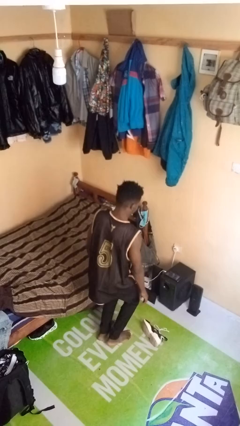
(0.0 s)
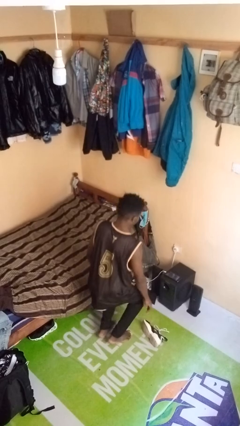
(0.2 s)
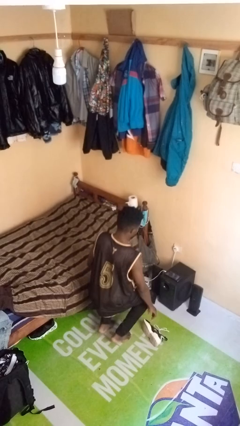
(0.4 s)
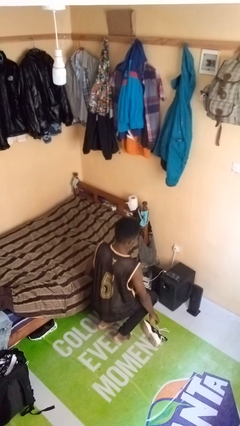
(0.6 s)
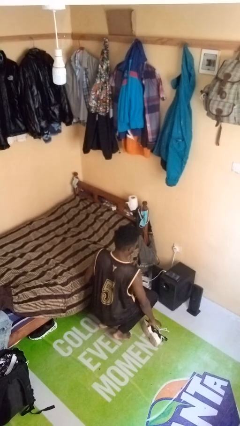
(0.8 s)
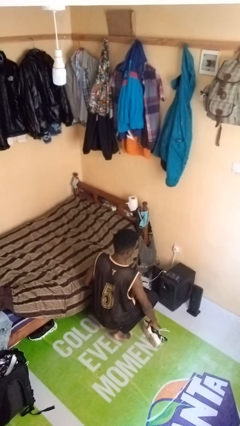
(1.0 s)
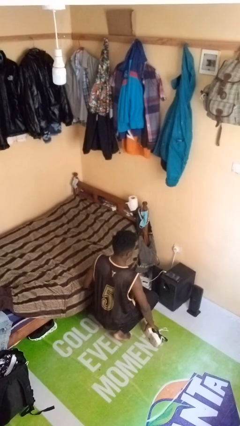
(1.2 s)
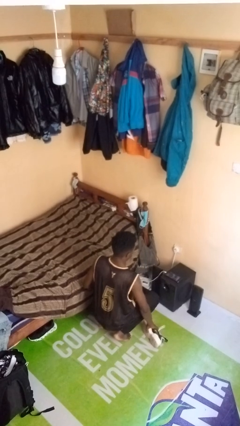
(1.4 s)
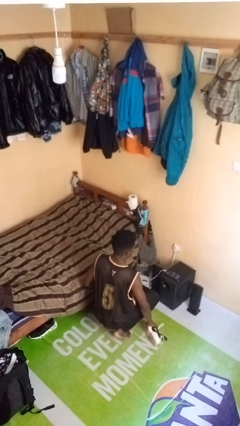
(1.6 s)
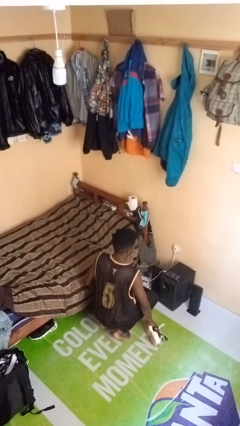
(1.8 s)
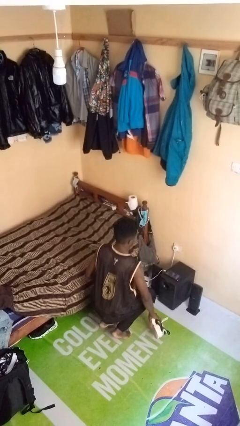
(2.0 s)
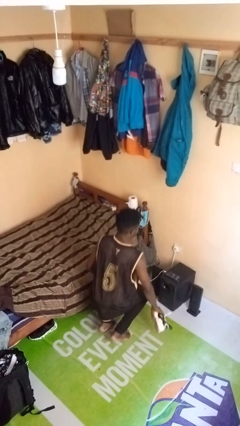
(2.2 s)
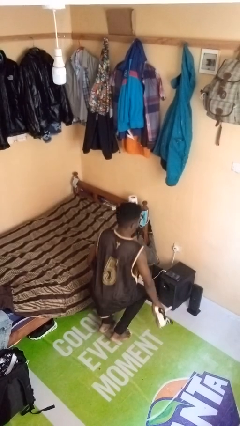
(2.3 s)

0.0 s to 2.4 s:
person picks up object from floor

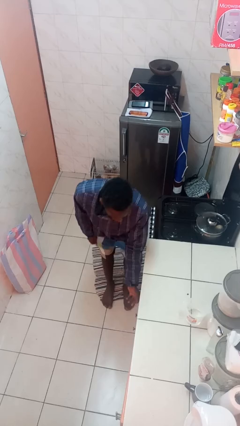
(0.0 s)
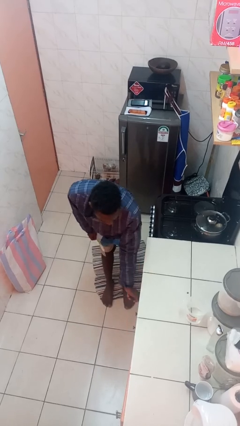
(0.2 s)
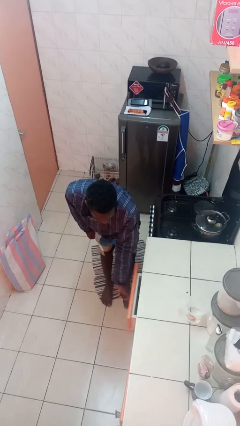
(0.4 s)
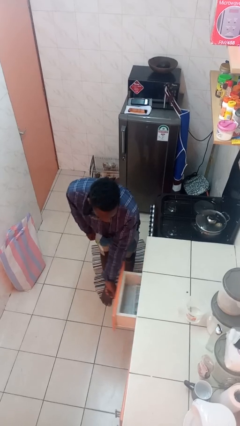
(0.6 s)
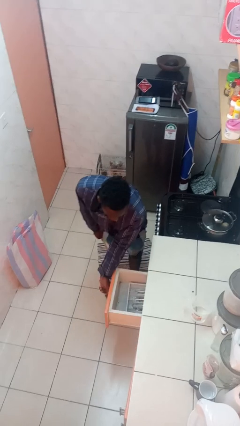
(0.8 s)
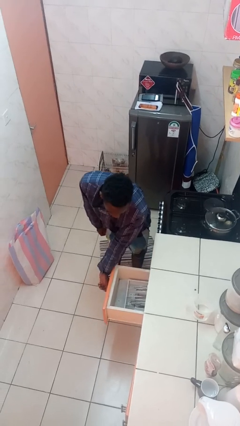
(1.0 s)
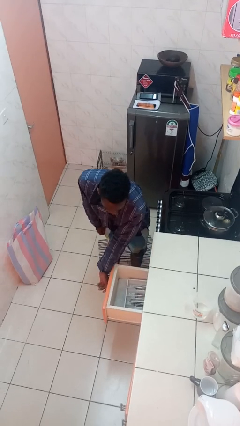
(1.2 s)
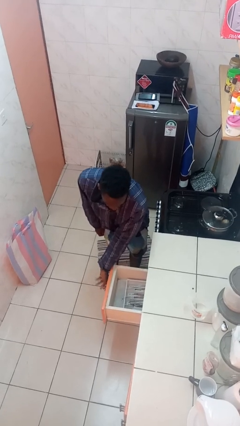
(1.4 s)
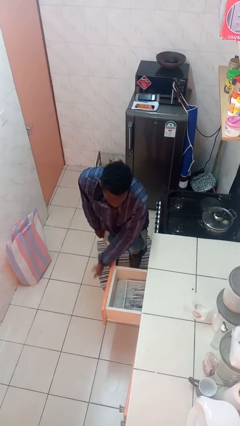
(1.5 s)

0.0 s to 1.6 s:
person opens kitchen drawer

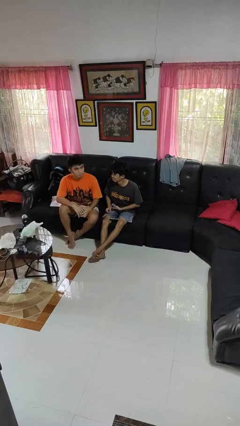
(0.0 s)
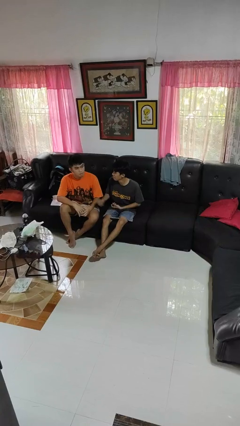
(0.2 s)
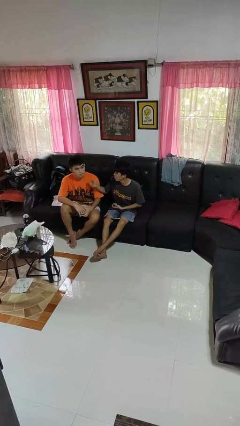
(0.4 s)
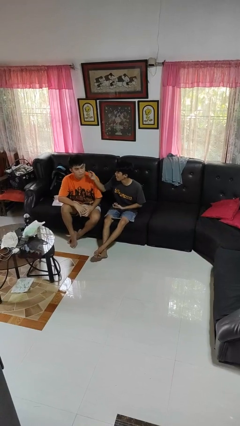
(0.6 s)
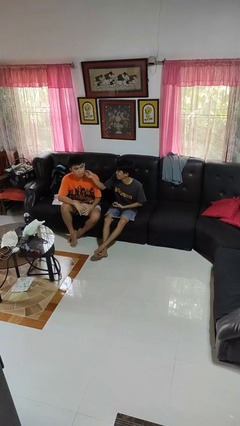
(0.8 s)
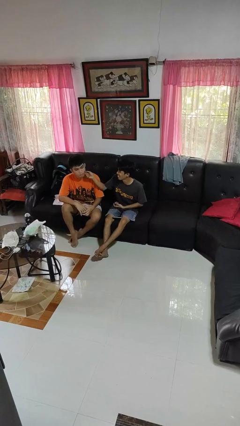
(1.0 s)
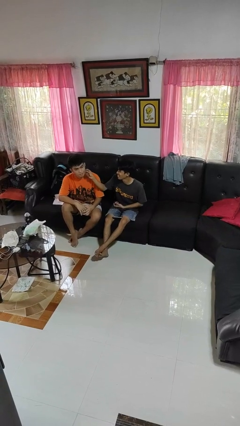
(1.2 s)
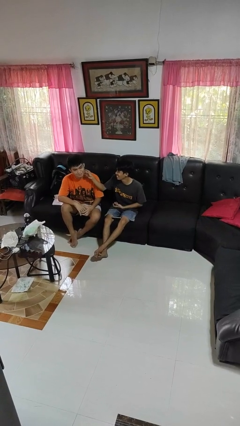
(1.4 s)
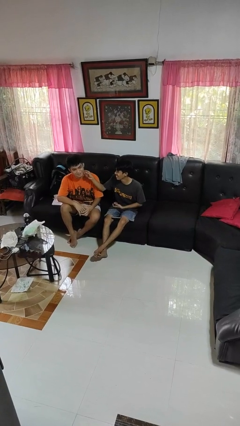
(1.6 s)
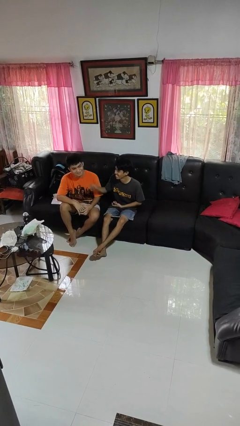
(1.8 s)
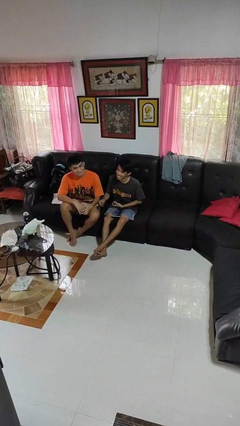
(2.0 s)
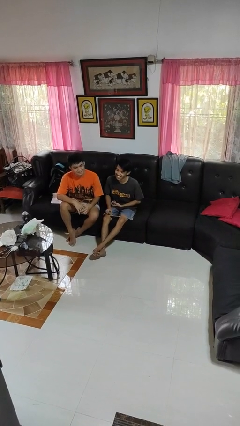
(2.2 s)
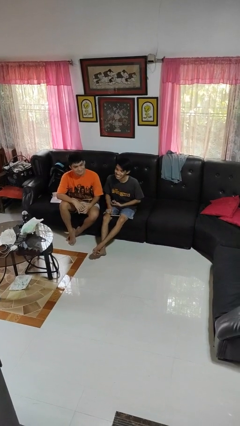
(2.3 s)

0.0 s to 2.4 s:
person touches face of person

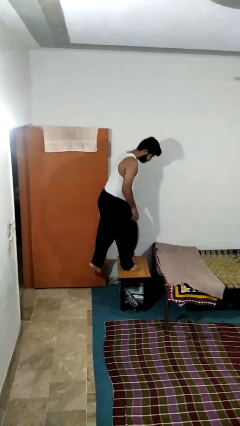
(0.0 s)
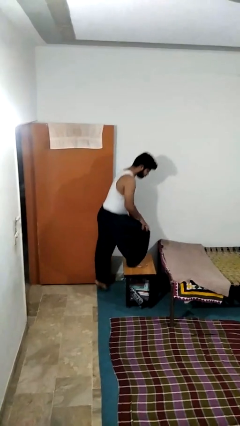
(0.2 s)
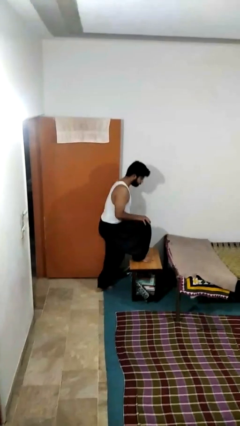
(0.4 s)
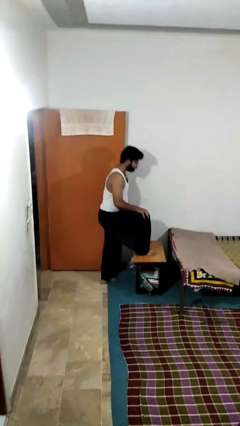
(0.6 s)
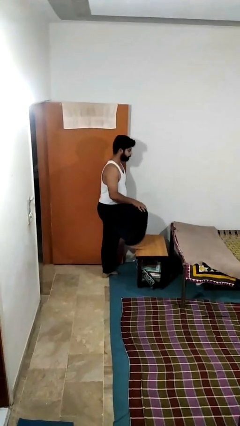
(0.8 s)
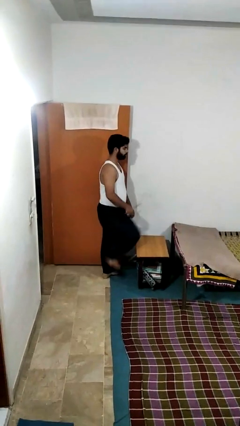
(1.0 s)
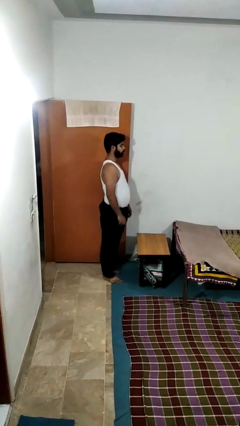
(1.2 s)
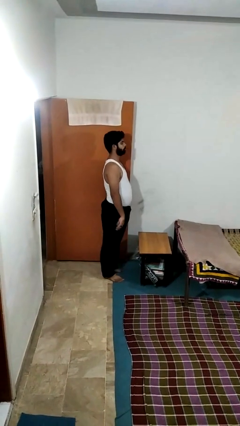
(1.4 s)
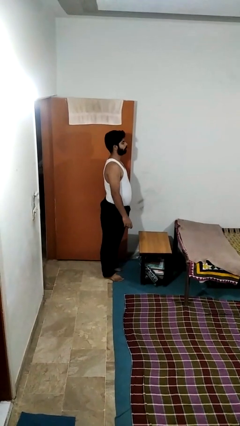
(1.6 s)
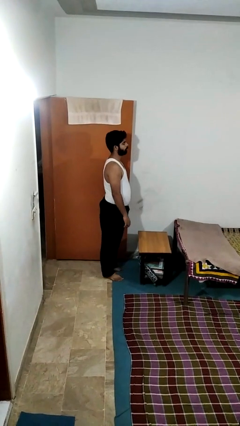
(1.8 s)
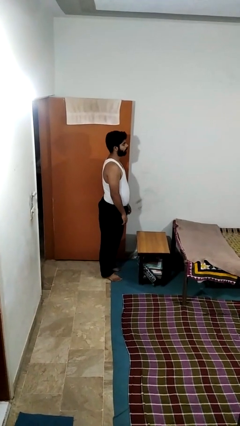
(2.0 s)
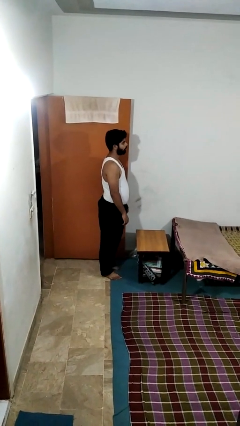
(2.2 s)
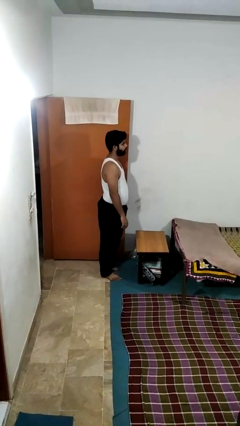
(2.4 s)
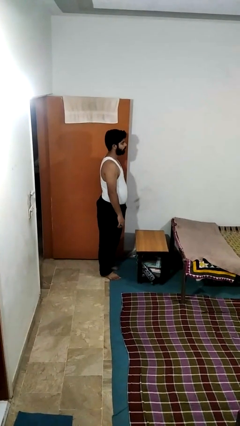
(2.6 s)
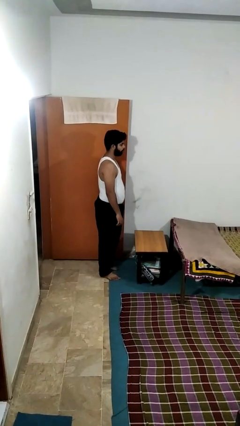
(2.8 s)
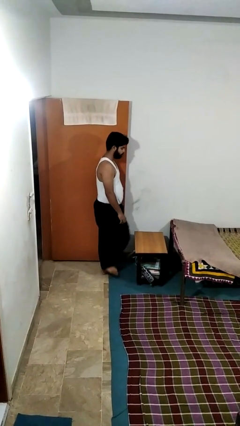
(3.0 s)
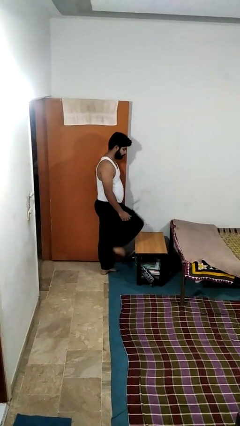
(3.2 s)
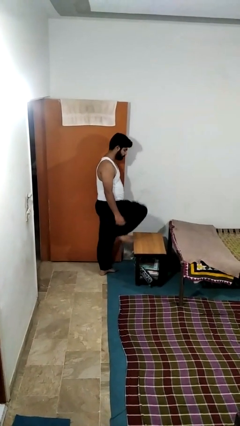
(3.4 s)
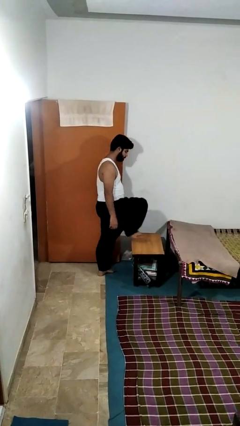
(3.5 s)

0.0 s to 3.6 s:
person climbs off table

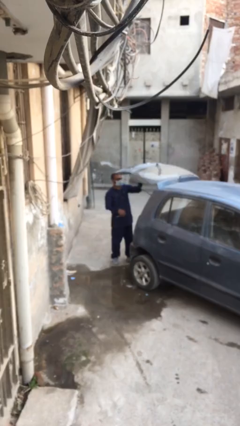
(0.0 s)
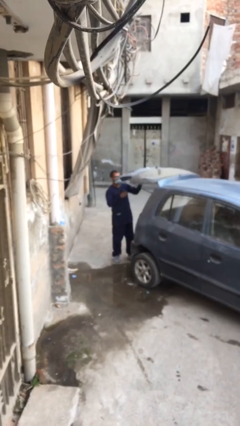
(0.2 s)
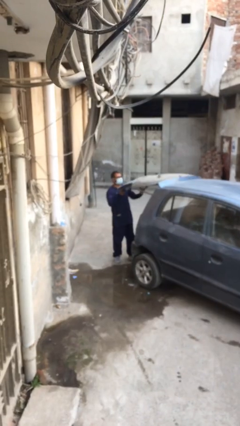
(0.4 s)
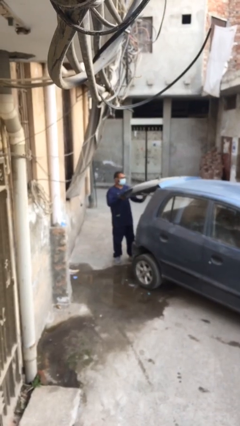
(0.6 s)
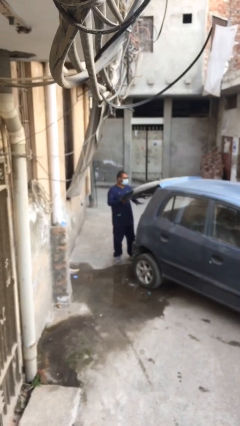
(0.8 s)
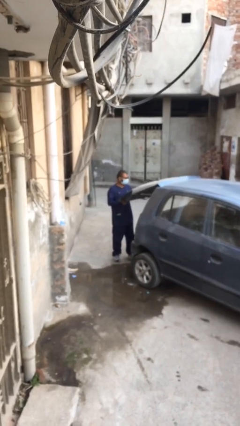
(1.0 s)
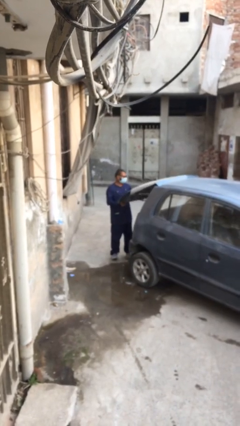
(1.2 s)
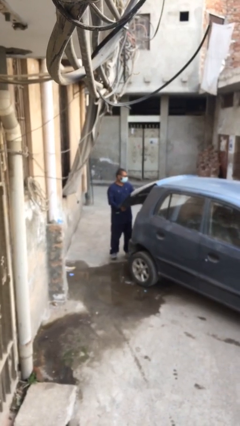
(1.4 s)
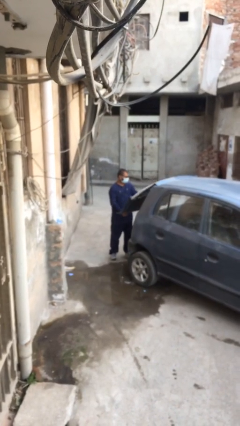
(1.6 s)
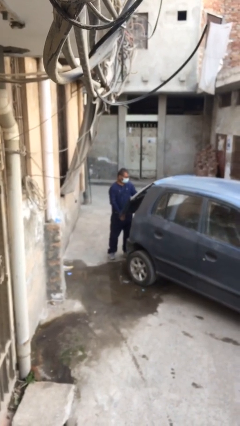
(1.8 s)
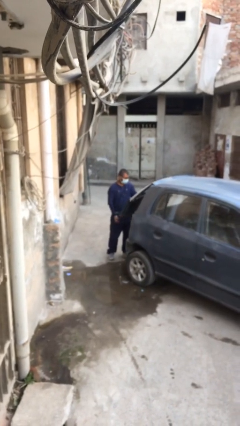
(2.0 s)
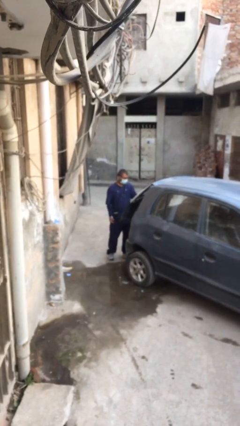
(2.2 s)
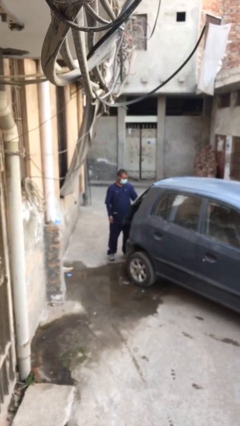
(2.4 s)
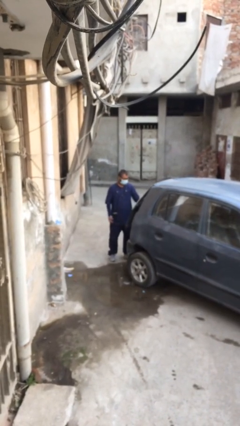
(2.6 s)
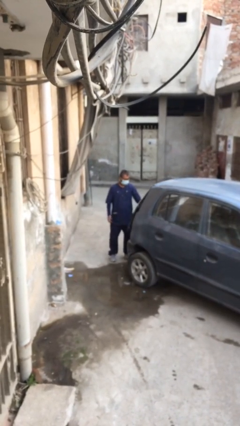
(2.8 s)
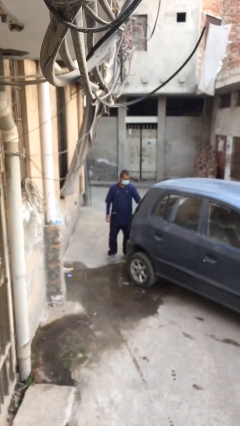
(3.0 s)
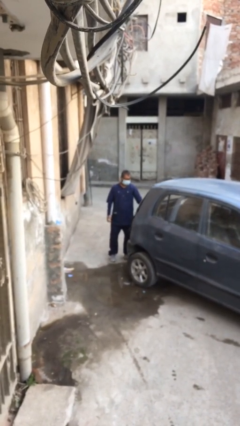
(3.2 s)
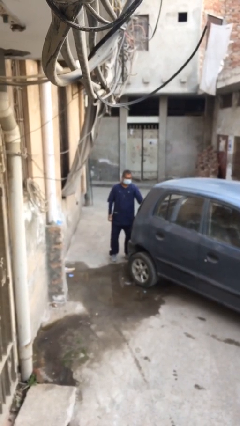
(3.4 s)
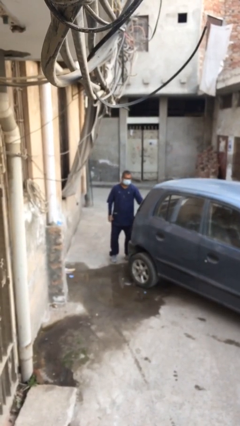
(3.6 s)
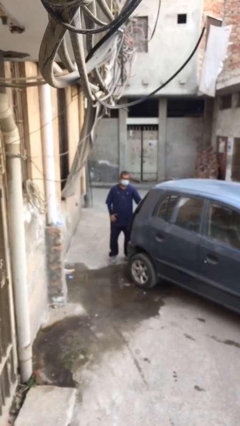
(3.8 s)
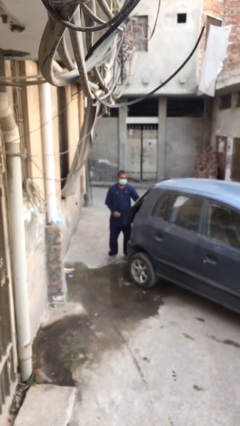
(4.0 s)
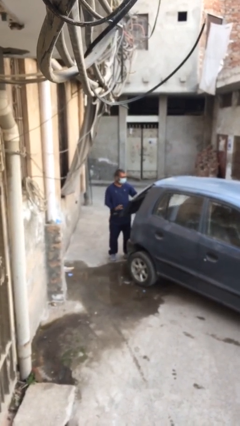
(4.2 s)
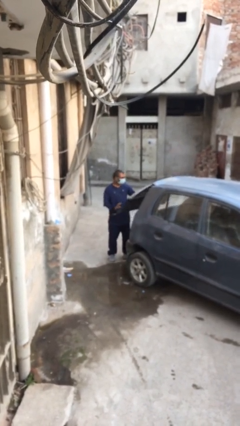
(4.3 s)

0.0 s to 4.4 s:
person closes car trunk

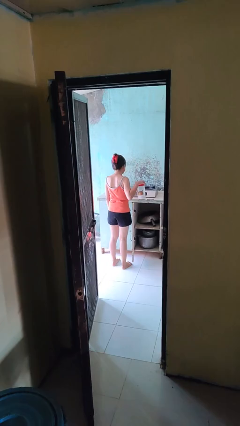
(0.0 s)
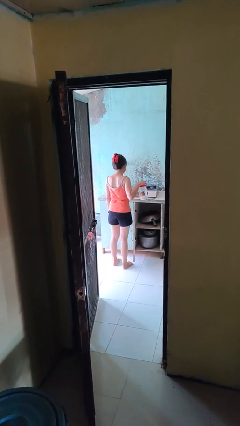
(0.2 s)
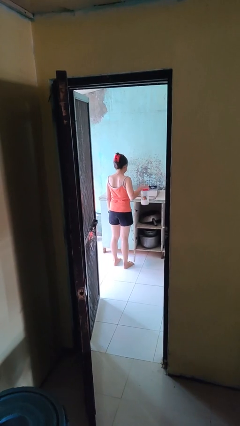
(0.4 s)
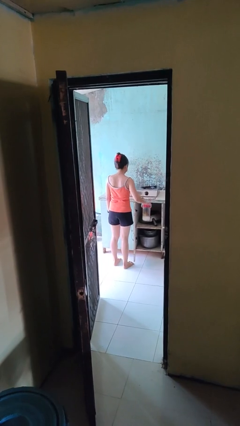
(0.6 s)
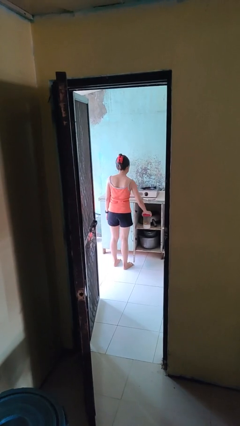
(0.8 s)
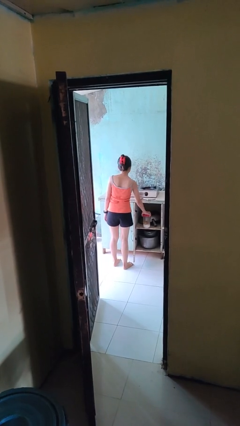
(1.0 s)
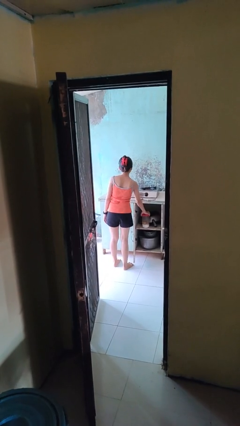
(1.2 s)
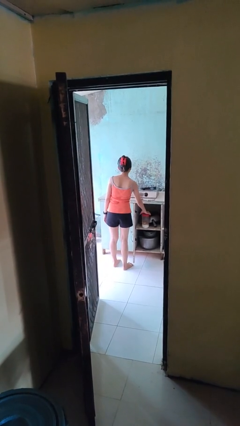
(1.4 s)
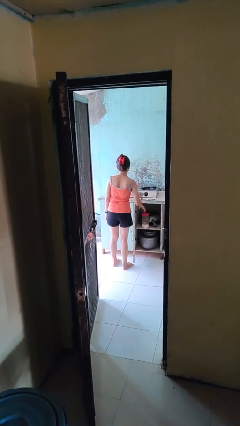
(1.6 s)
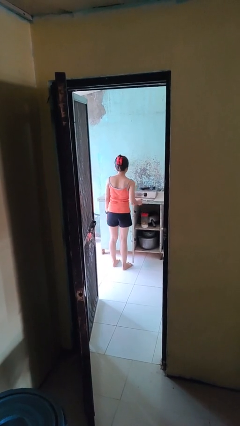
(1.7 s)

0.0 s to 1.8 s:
person puts down object into cabinet

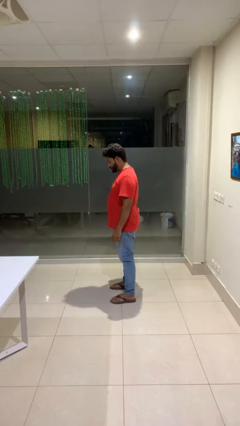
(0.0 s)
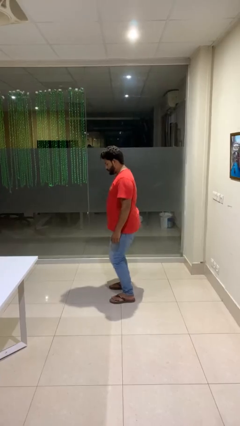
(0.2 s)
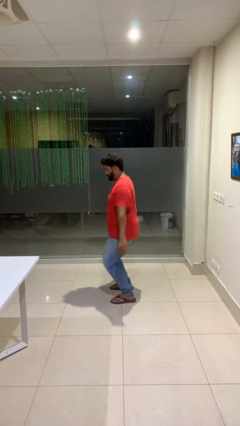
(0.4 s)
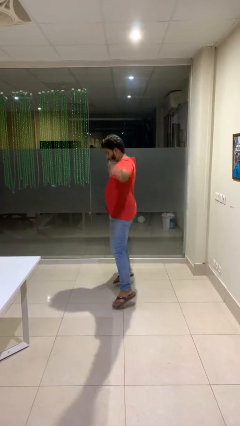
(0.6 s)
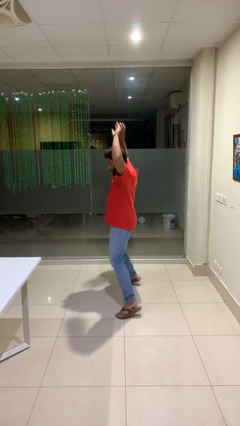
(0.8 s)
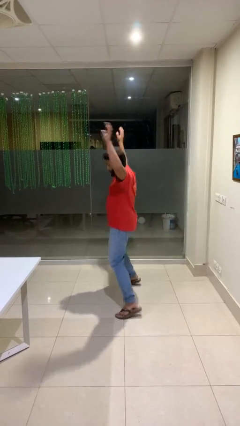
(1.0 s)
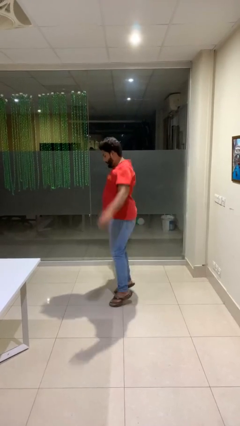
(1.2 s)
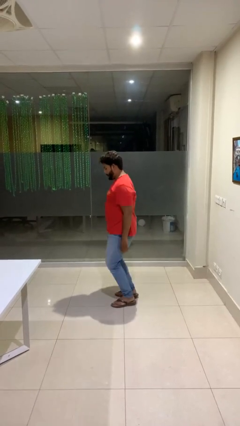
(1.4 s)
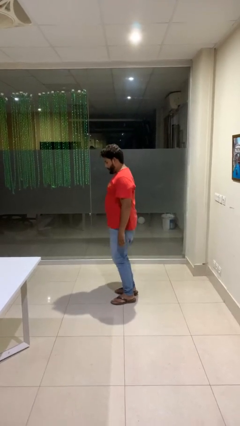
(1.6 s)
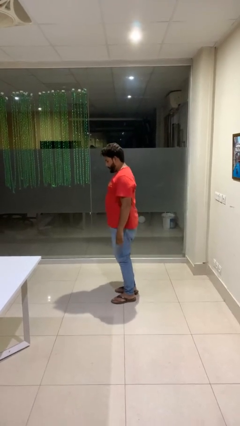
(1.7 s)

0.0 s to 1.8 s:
person exercises with jumping jacks
